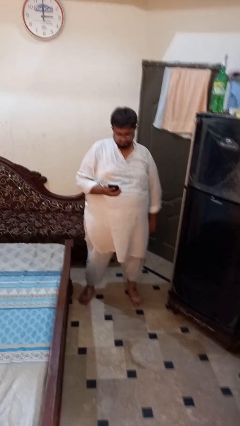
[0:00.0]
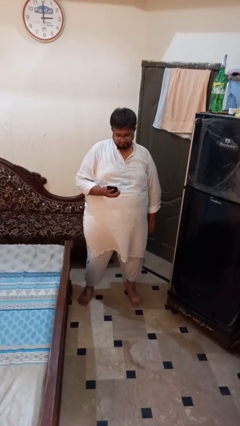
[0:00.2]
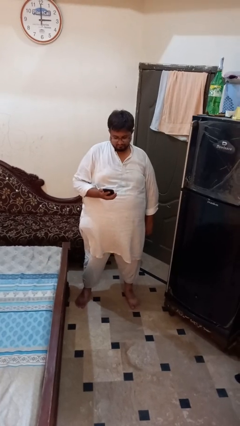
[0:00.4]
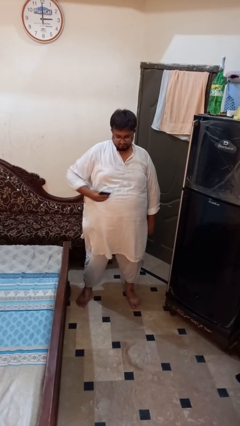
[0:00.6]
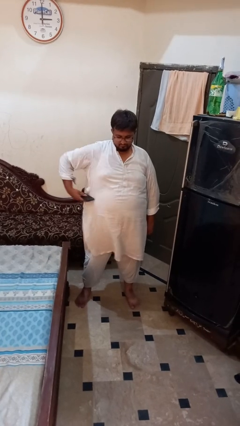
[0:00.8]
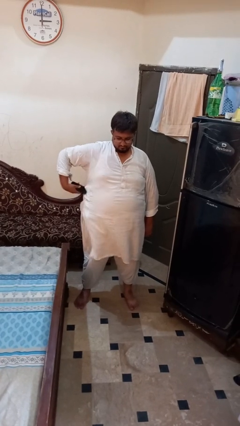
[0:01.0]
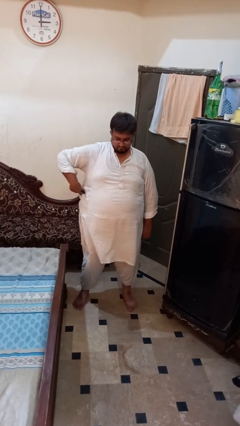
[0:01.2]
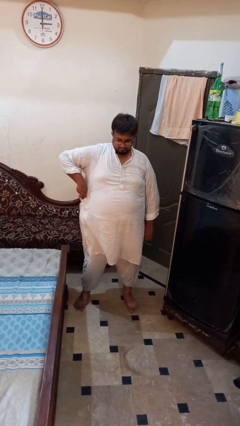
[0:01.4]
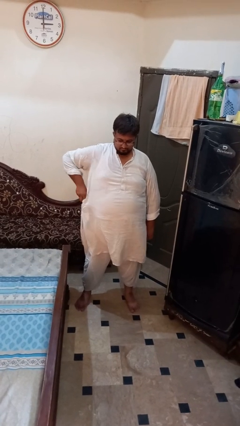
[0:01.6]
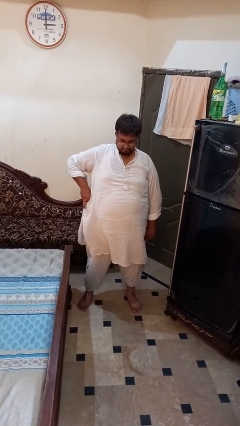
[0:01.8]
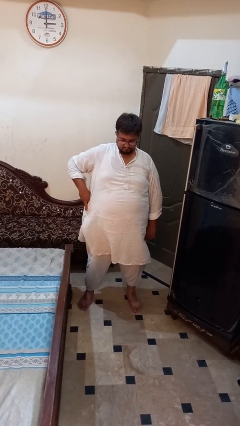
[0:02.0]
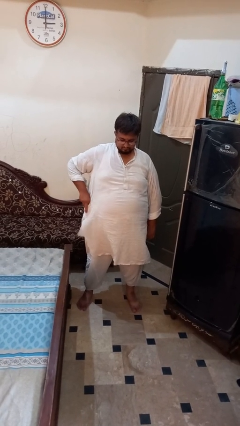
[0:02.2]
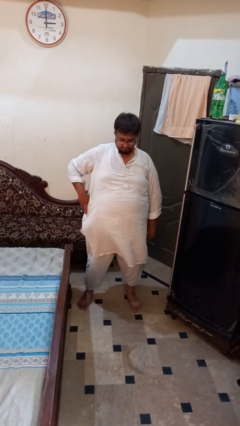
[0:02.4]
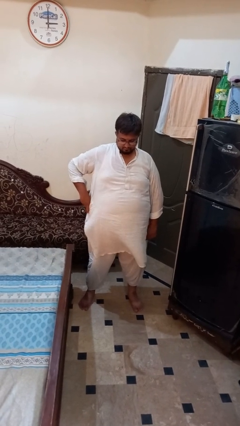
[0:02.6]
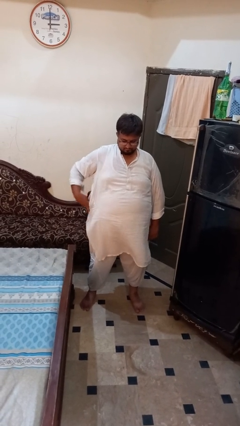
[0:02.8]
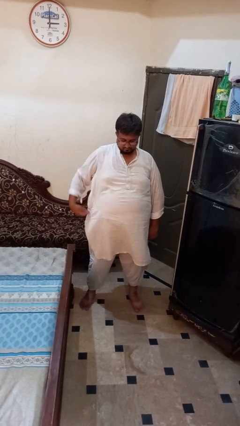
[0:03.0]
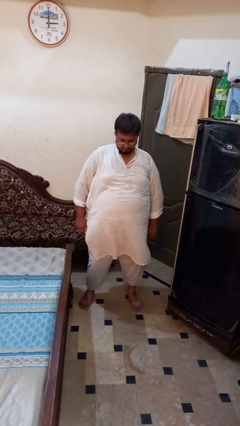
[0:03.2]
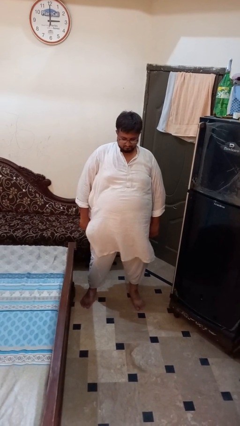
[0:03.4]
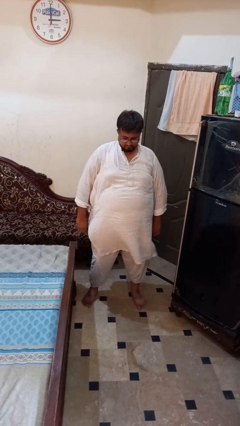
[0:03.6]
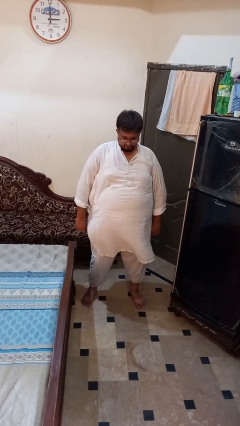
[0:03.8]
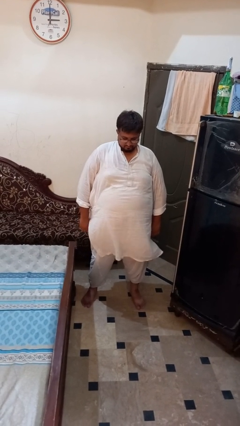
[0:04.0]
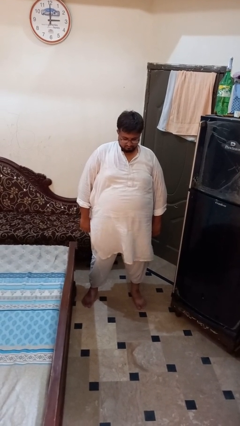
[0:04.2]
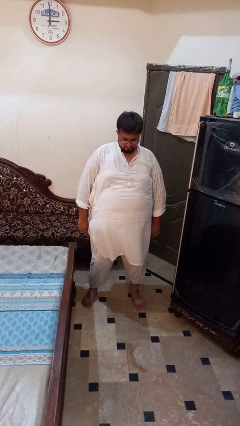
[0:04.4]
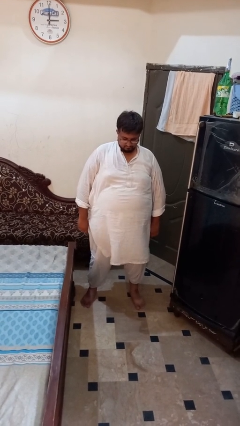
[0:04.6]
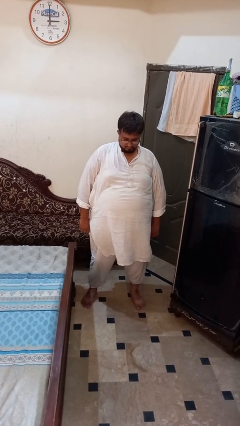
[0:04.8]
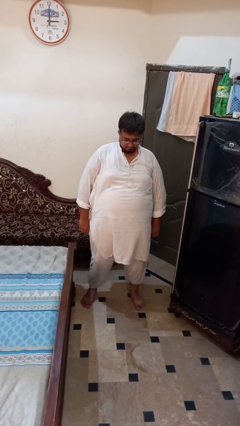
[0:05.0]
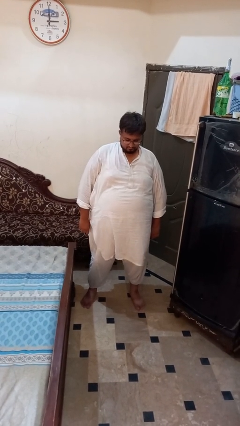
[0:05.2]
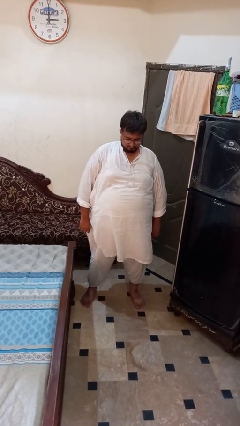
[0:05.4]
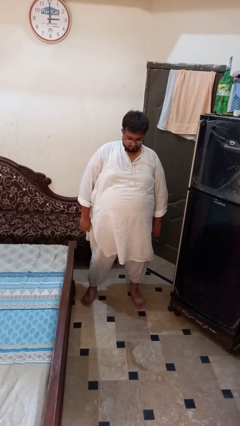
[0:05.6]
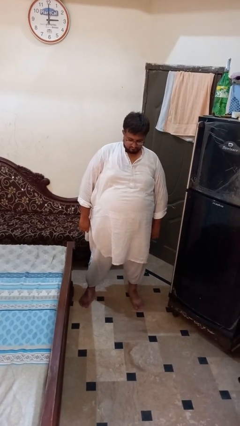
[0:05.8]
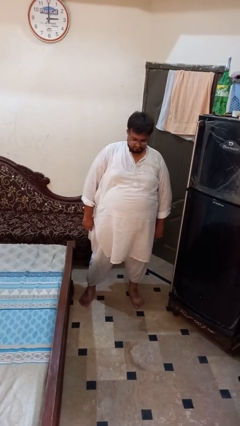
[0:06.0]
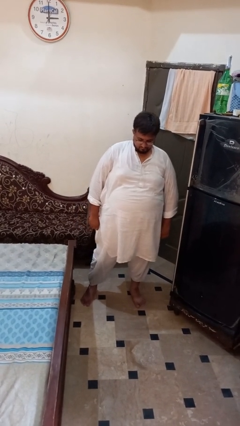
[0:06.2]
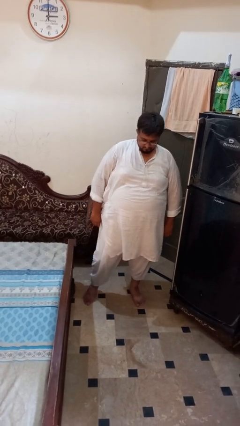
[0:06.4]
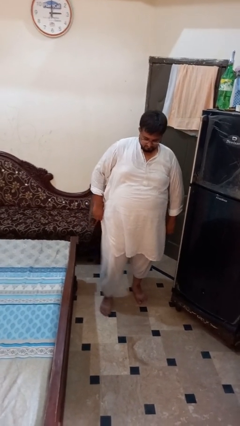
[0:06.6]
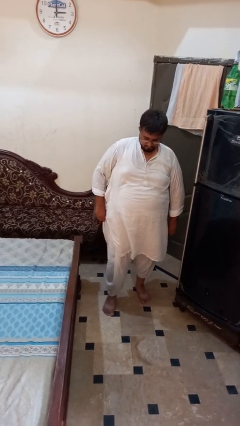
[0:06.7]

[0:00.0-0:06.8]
person puts phone into pocket

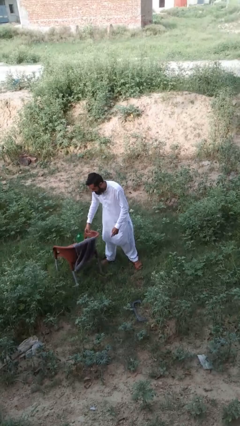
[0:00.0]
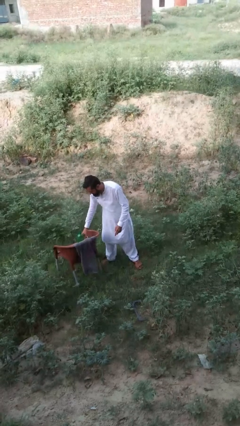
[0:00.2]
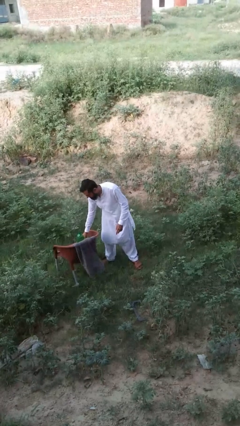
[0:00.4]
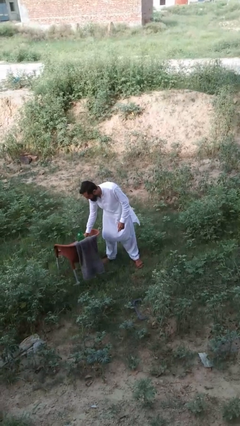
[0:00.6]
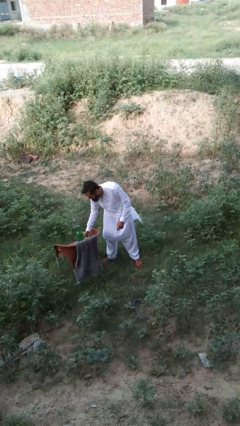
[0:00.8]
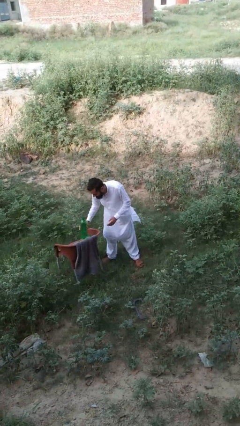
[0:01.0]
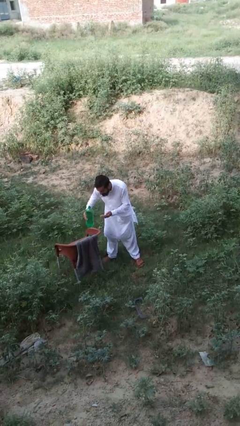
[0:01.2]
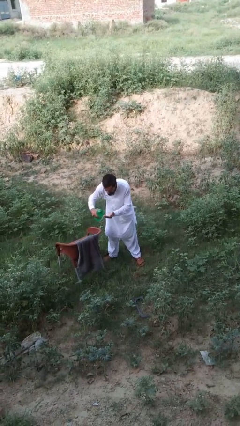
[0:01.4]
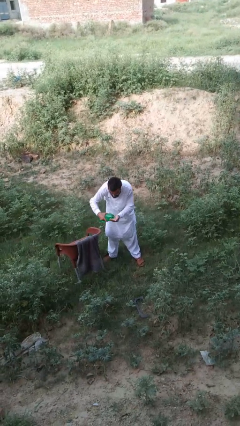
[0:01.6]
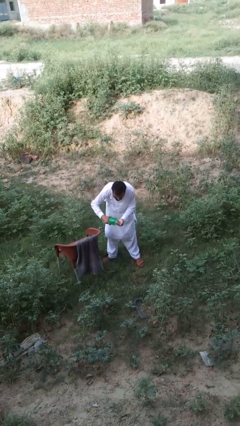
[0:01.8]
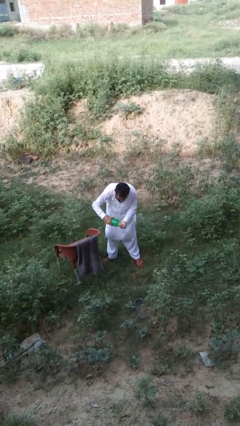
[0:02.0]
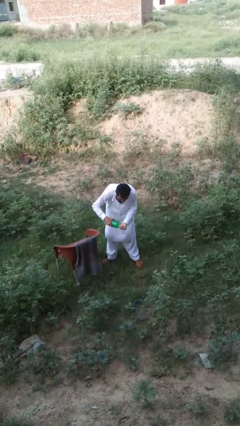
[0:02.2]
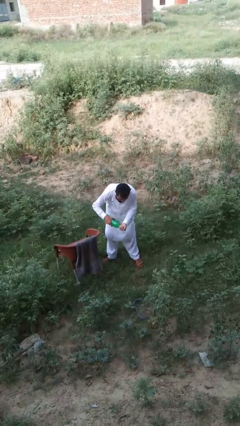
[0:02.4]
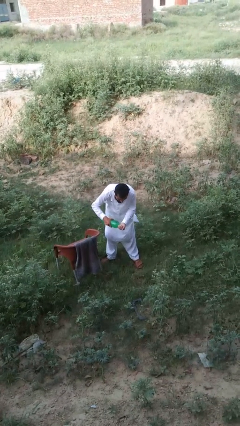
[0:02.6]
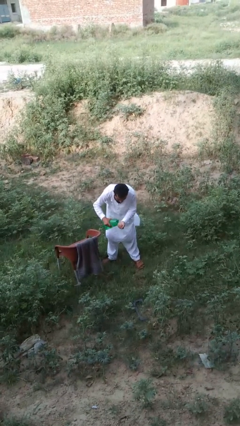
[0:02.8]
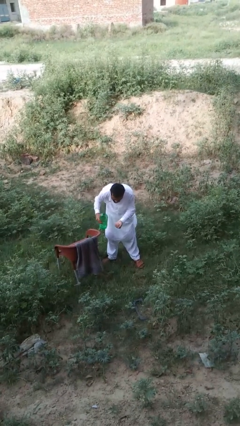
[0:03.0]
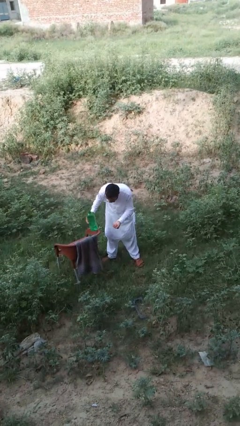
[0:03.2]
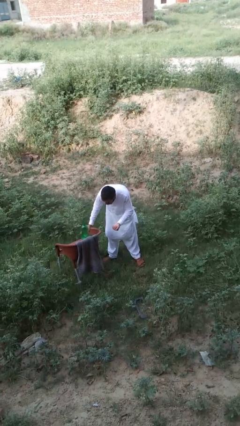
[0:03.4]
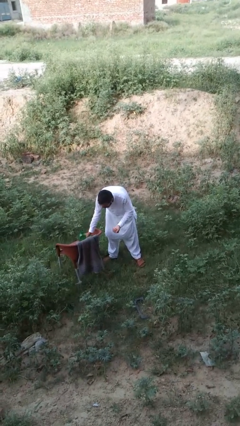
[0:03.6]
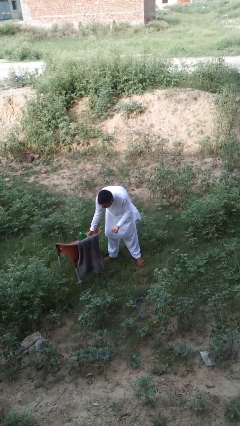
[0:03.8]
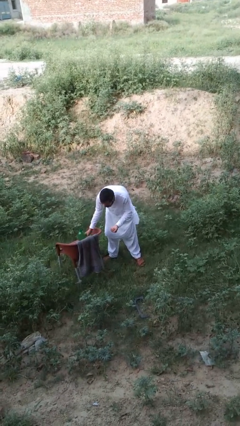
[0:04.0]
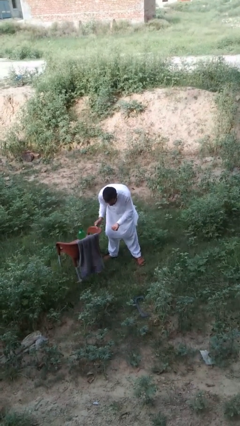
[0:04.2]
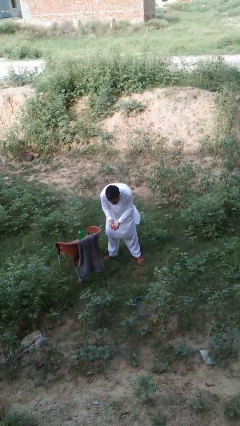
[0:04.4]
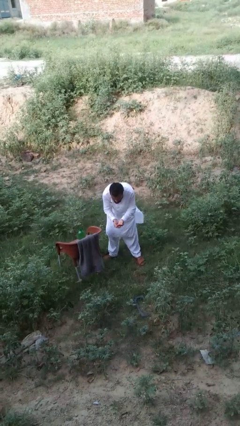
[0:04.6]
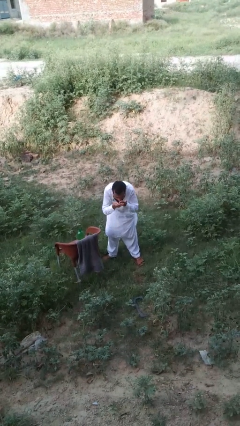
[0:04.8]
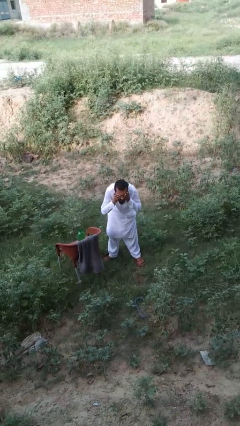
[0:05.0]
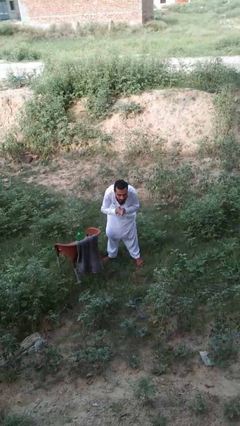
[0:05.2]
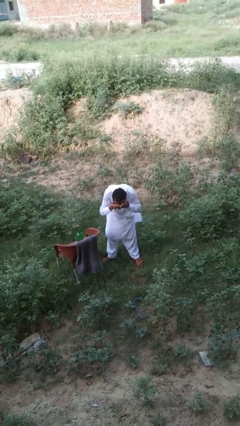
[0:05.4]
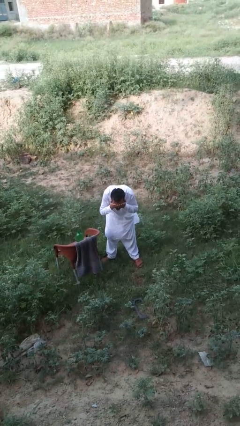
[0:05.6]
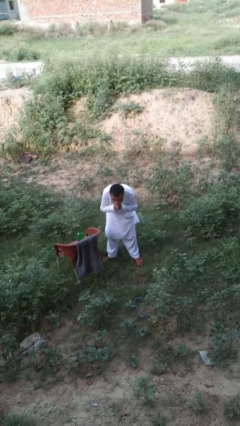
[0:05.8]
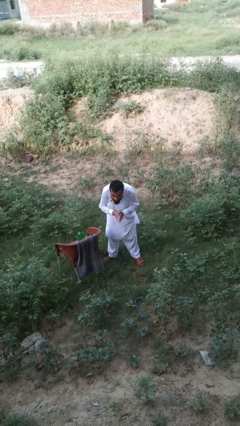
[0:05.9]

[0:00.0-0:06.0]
person washes face

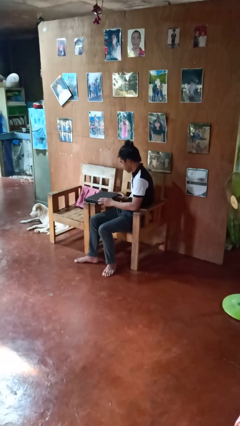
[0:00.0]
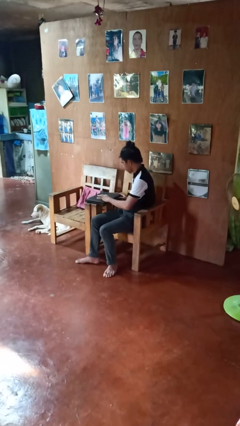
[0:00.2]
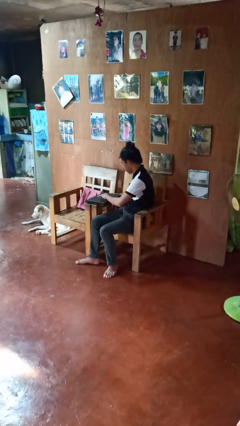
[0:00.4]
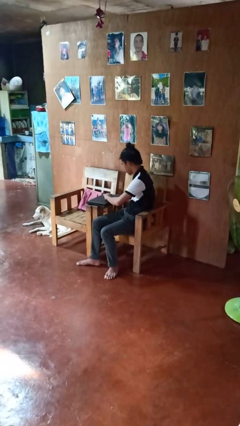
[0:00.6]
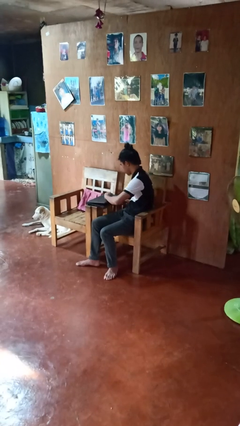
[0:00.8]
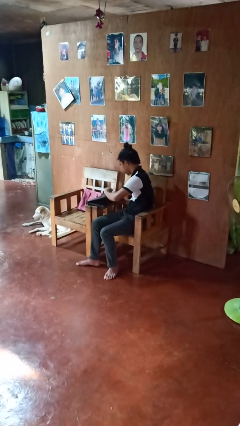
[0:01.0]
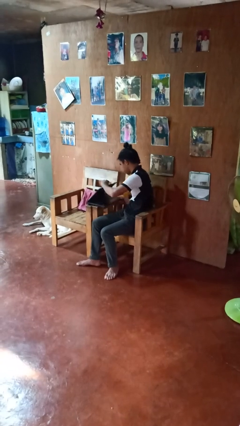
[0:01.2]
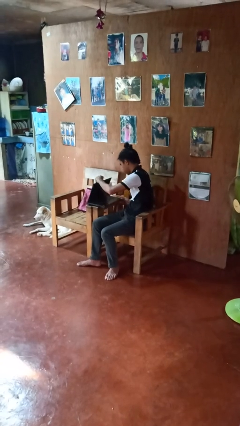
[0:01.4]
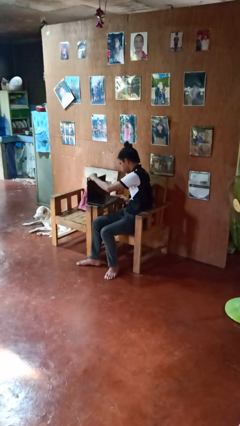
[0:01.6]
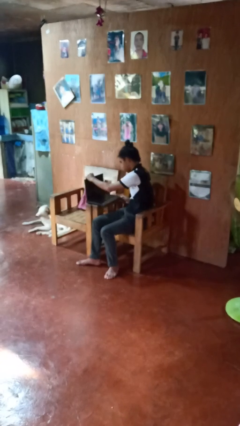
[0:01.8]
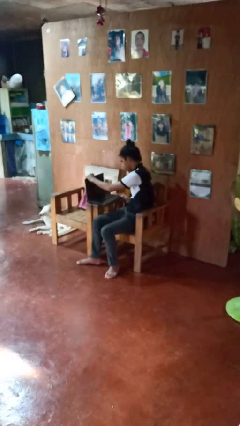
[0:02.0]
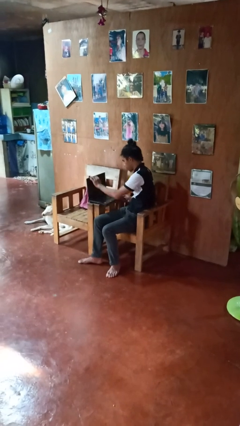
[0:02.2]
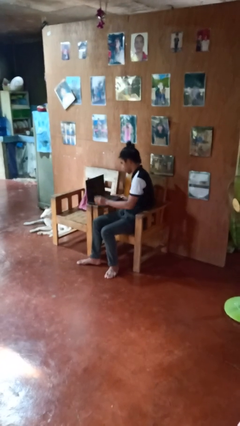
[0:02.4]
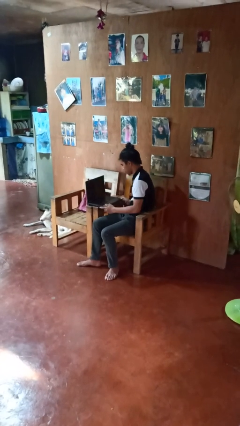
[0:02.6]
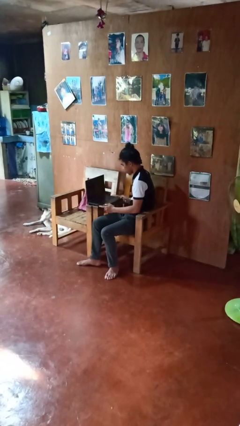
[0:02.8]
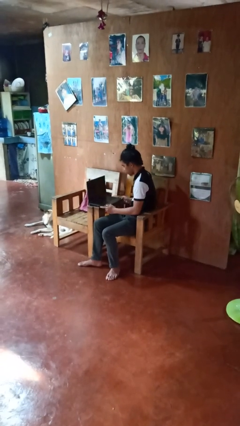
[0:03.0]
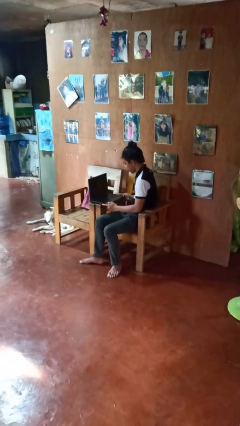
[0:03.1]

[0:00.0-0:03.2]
person opens laptop

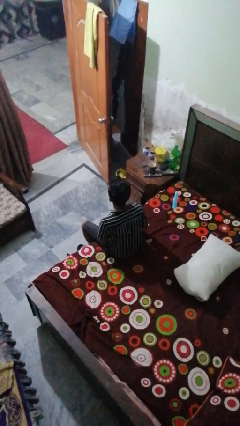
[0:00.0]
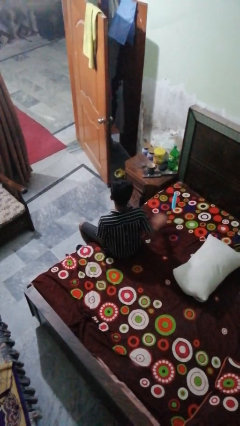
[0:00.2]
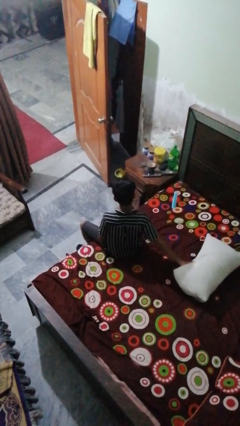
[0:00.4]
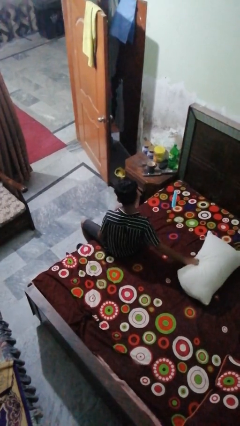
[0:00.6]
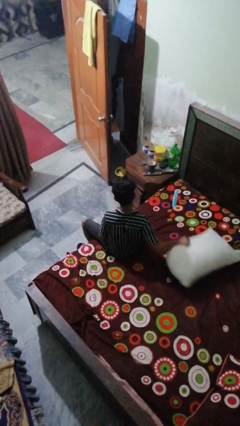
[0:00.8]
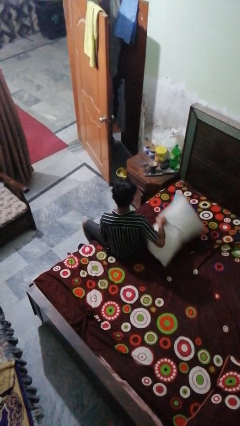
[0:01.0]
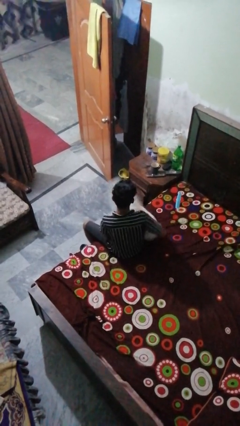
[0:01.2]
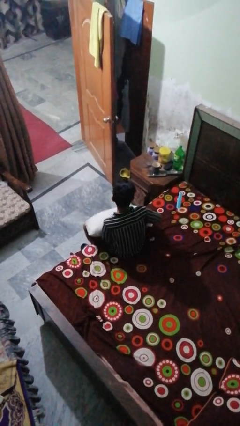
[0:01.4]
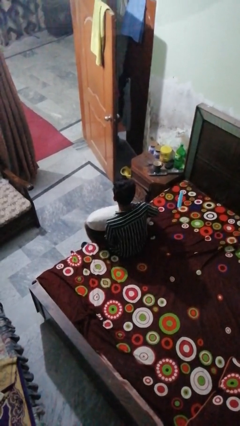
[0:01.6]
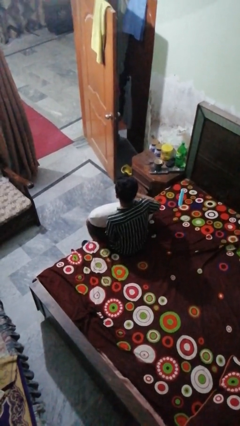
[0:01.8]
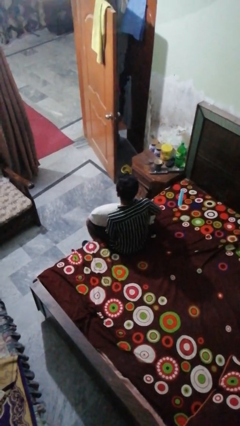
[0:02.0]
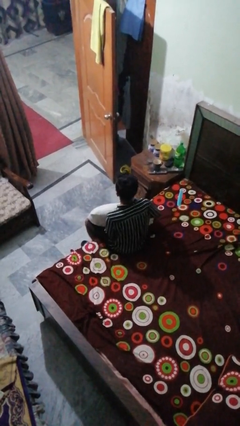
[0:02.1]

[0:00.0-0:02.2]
person picks up object from bed
